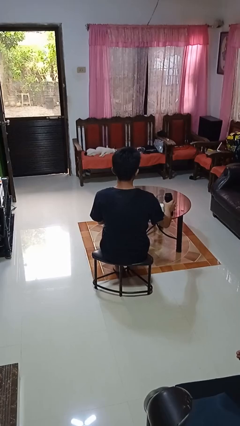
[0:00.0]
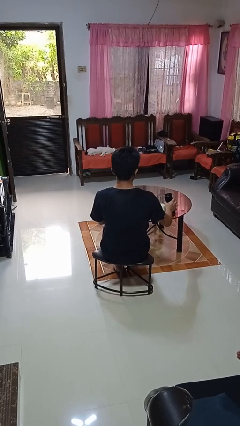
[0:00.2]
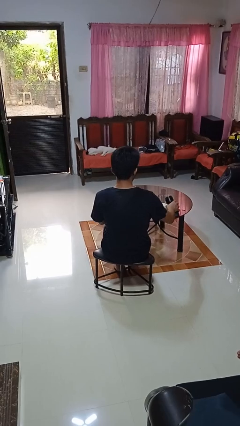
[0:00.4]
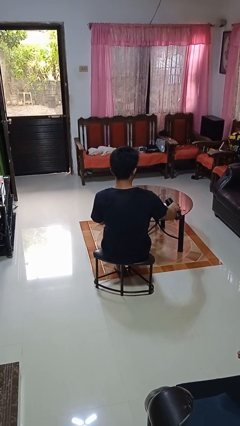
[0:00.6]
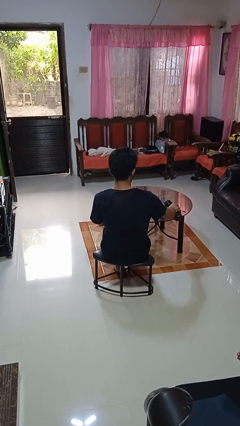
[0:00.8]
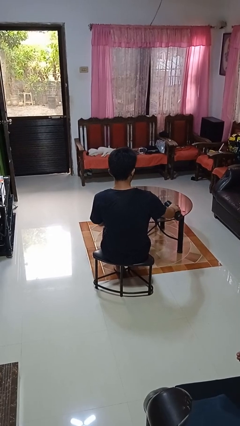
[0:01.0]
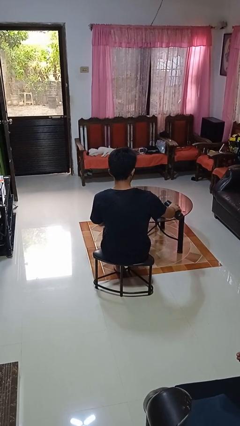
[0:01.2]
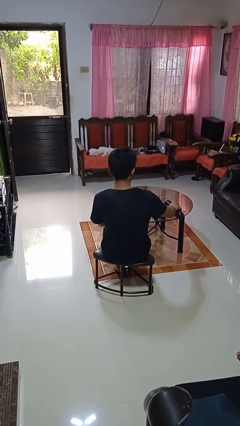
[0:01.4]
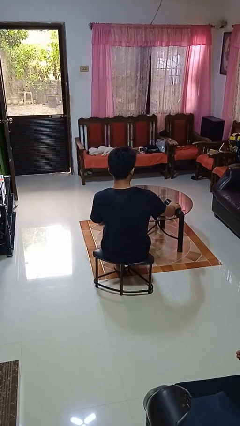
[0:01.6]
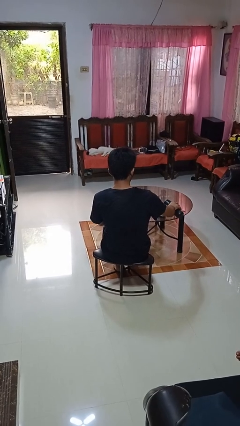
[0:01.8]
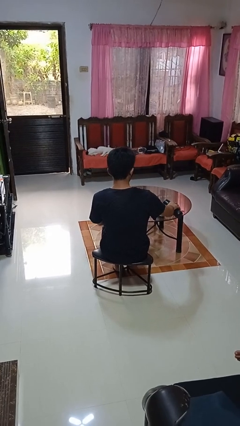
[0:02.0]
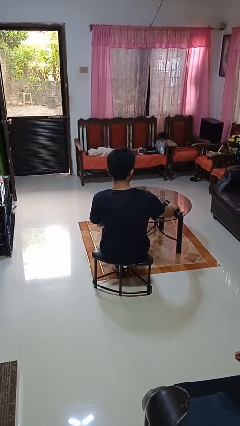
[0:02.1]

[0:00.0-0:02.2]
person pours liquid into cup

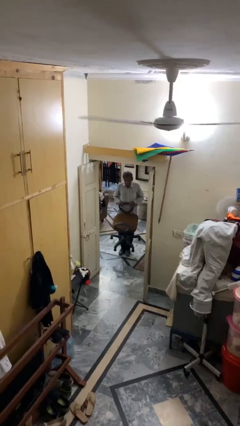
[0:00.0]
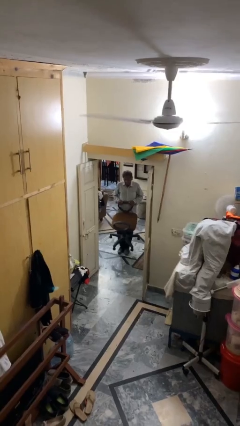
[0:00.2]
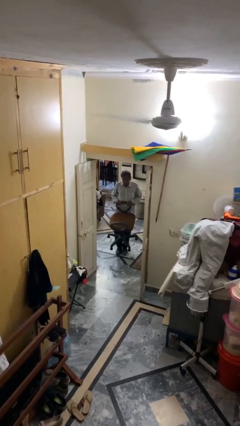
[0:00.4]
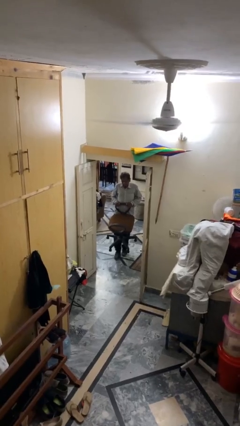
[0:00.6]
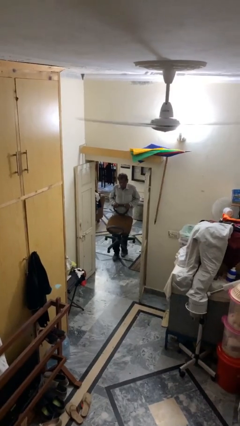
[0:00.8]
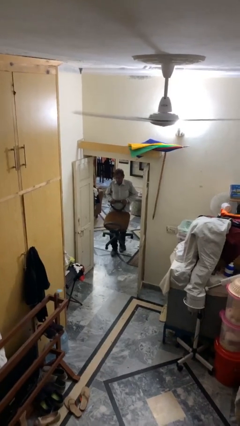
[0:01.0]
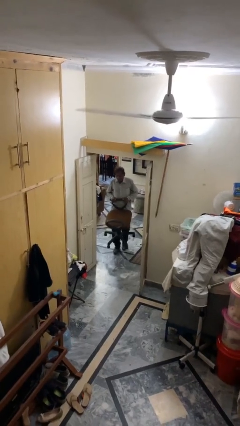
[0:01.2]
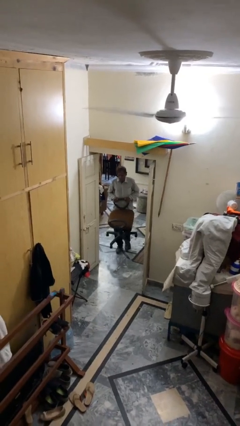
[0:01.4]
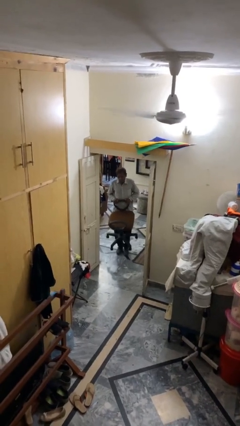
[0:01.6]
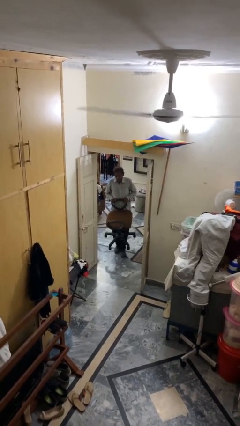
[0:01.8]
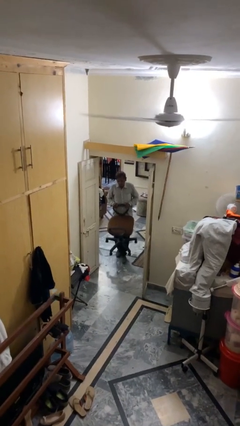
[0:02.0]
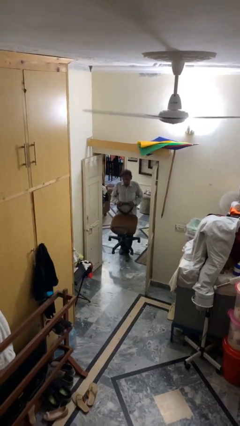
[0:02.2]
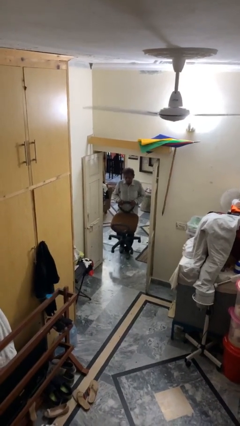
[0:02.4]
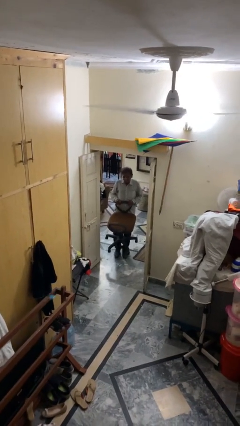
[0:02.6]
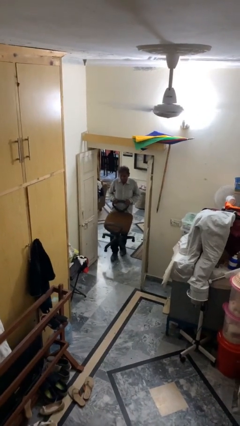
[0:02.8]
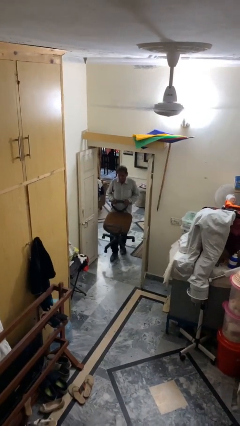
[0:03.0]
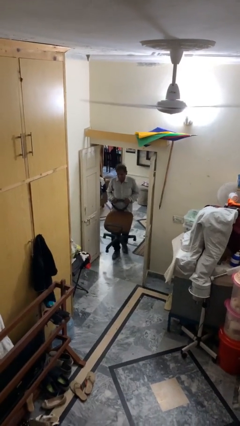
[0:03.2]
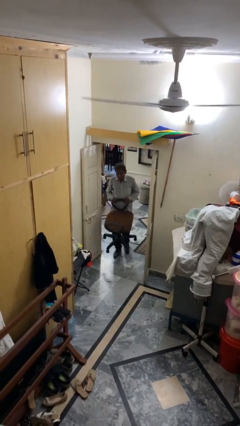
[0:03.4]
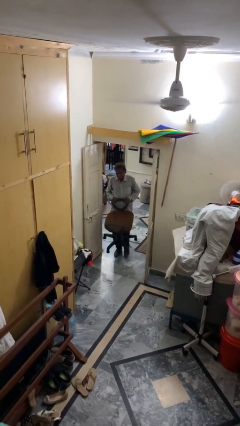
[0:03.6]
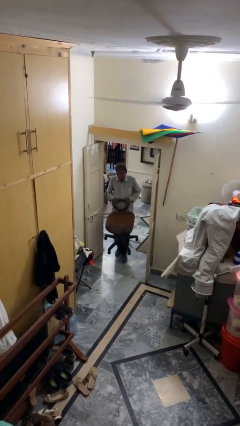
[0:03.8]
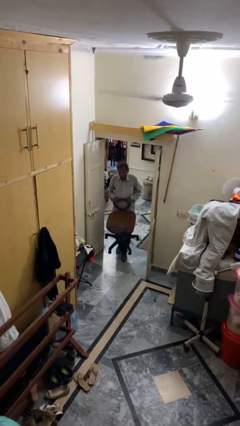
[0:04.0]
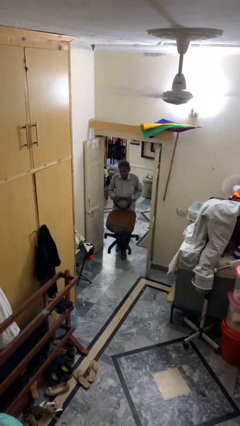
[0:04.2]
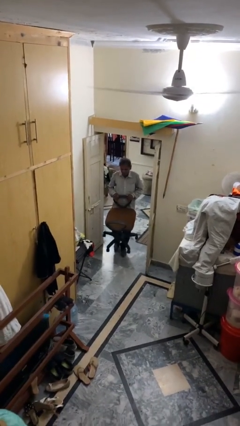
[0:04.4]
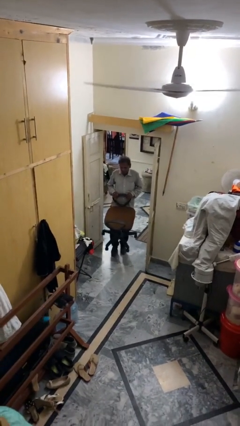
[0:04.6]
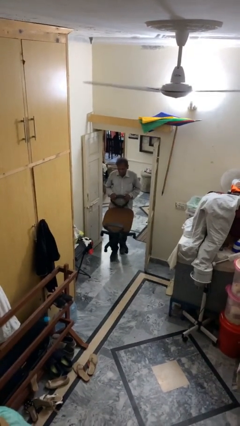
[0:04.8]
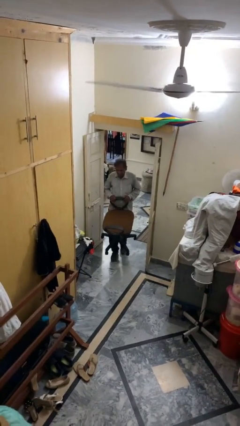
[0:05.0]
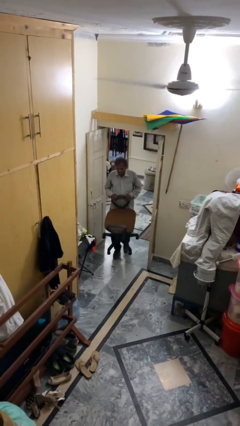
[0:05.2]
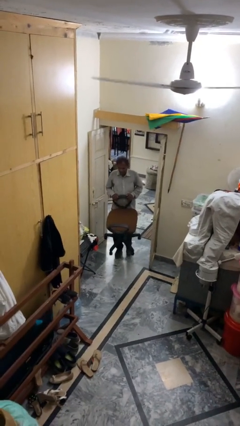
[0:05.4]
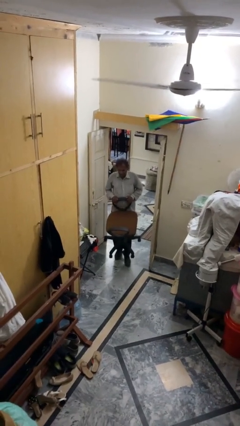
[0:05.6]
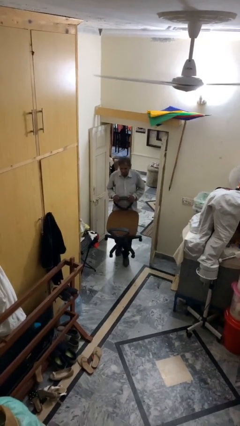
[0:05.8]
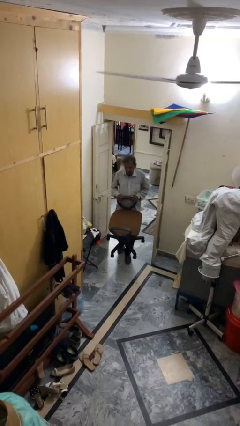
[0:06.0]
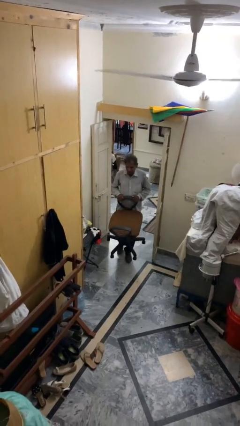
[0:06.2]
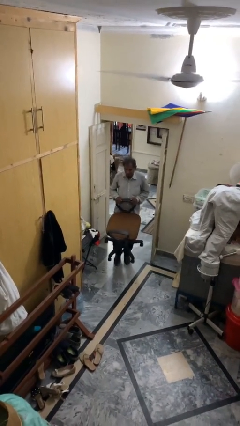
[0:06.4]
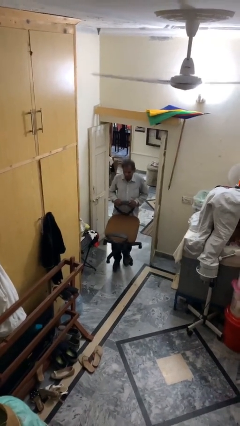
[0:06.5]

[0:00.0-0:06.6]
person carries heavy object

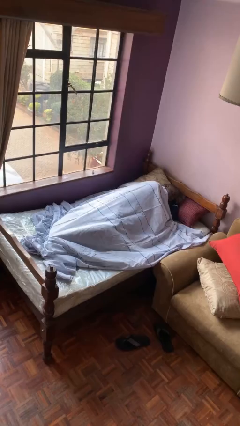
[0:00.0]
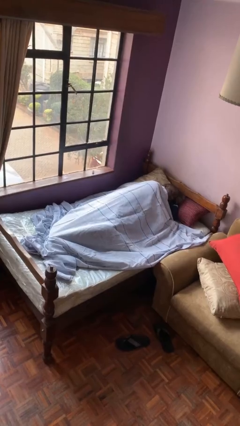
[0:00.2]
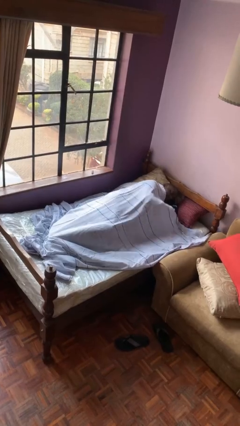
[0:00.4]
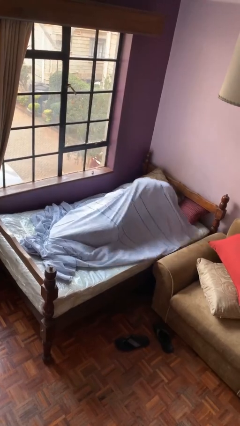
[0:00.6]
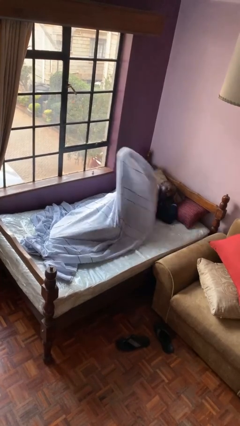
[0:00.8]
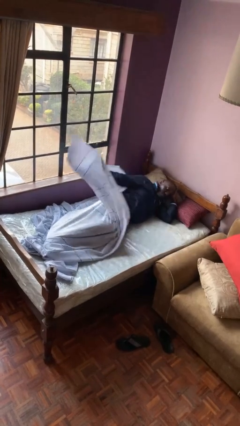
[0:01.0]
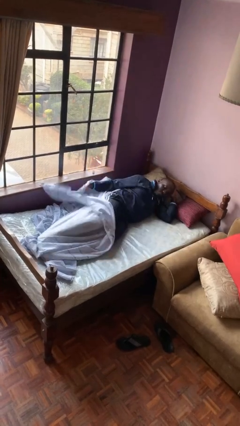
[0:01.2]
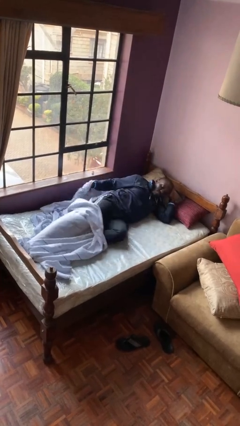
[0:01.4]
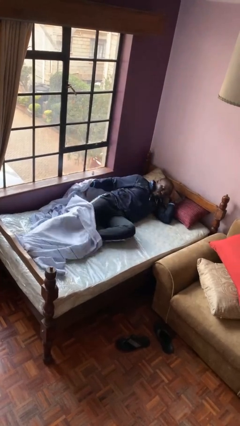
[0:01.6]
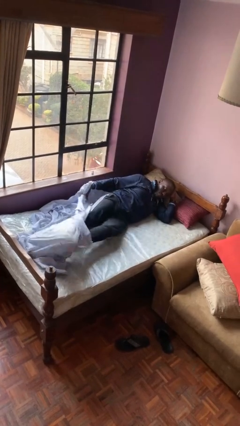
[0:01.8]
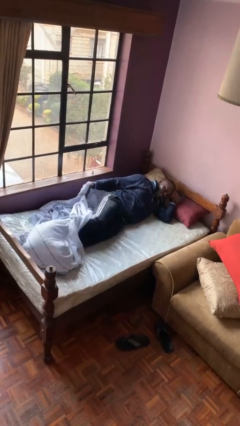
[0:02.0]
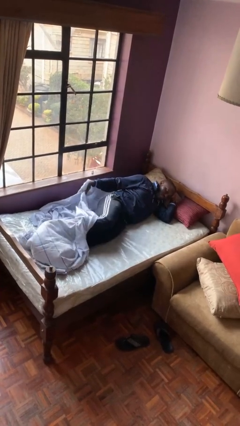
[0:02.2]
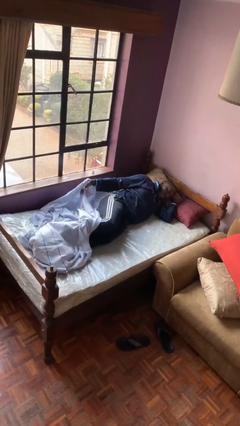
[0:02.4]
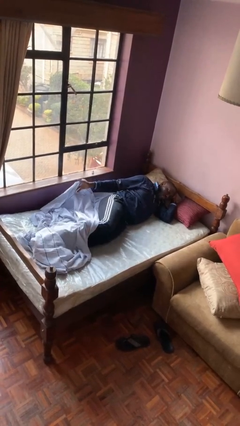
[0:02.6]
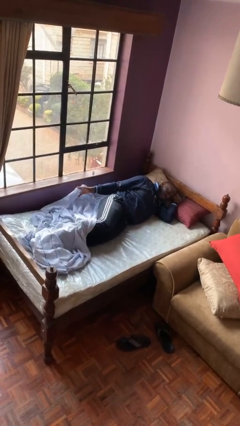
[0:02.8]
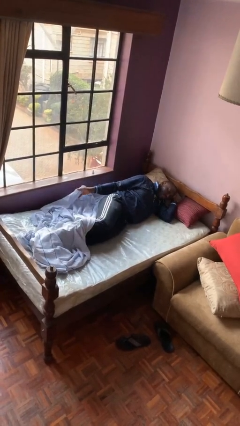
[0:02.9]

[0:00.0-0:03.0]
person uncovers with bedsheets

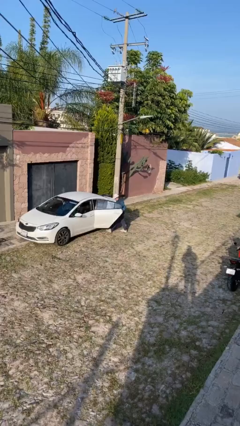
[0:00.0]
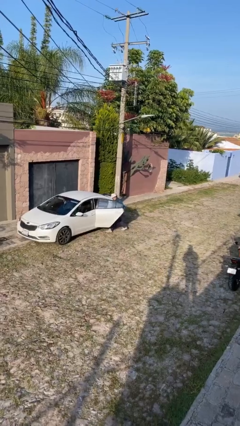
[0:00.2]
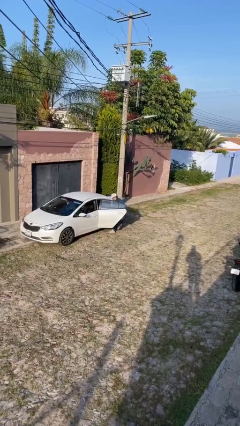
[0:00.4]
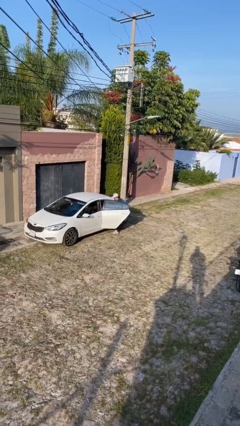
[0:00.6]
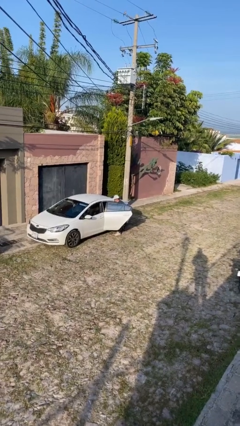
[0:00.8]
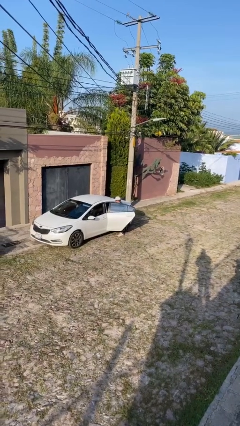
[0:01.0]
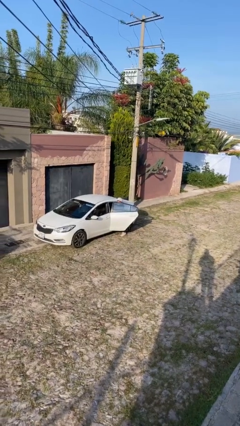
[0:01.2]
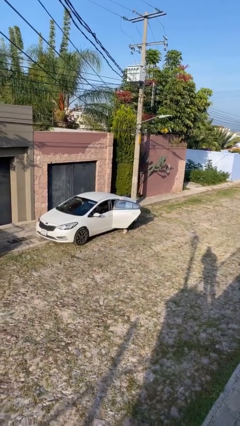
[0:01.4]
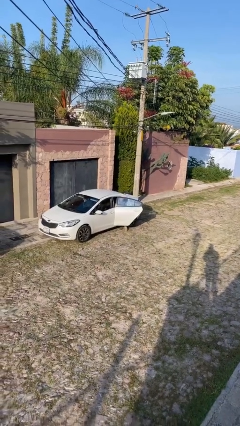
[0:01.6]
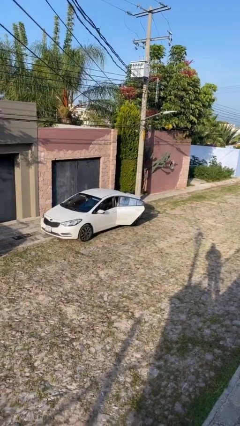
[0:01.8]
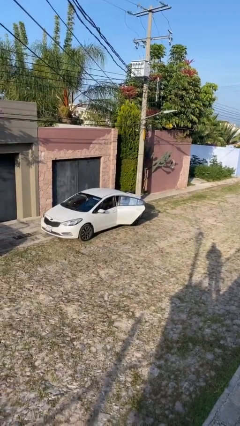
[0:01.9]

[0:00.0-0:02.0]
person enters car

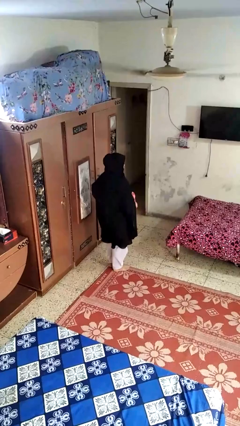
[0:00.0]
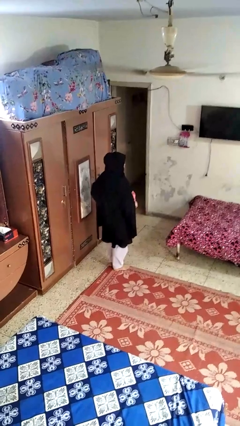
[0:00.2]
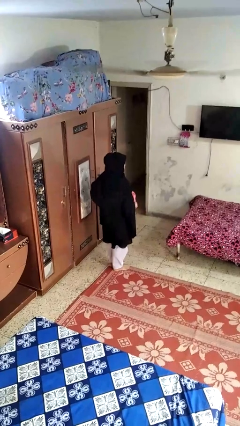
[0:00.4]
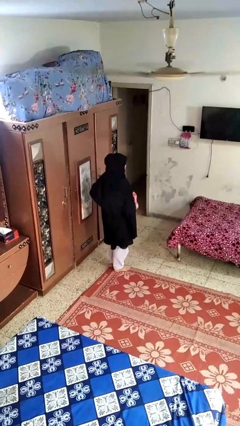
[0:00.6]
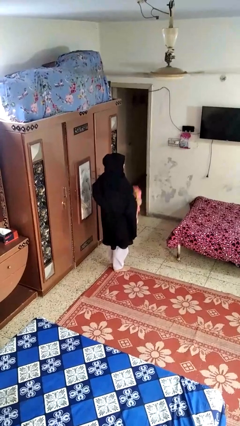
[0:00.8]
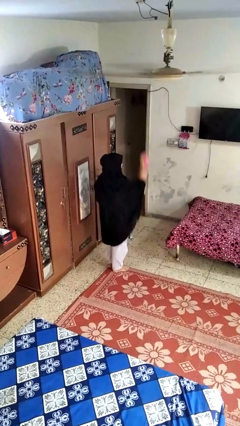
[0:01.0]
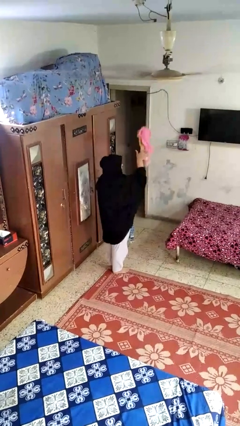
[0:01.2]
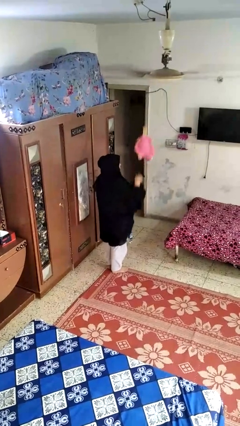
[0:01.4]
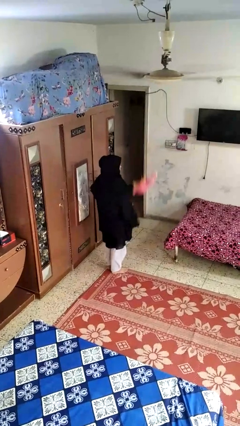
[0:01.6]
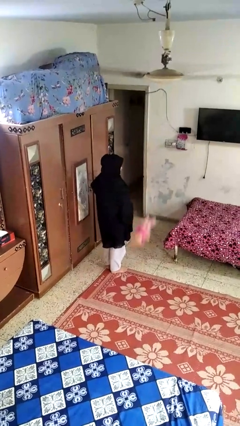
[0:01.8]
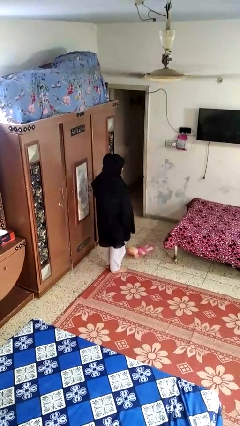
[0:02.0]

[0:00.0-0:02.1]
person throws object into air

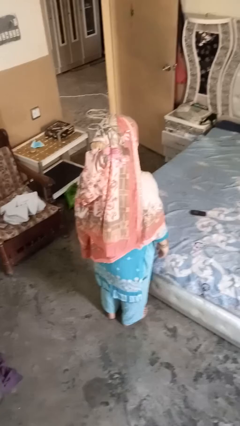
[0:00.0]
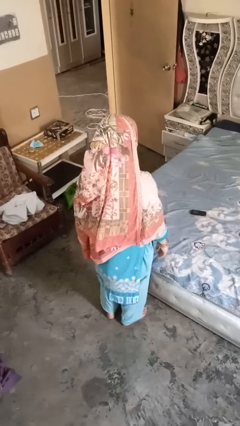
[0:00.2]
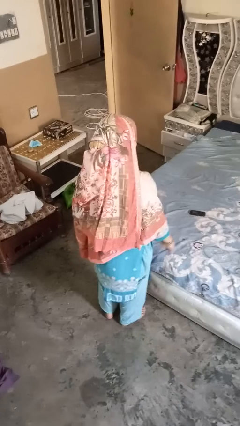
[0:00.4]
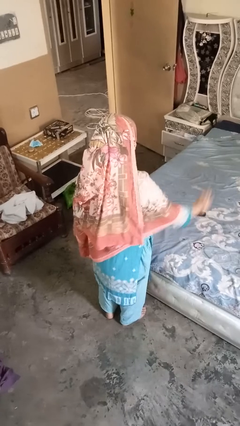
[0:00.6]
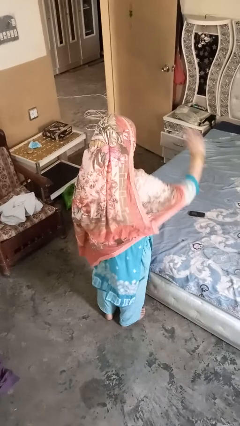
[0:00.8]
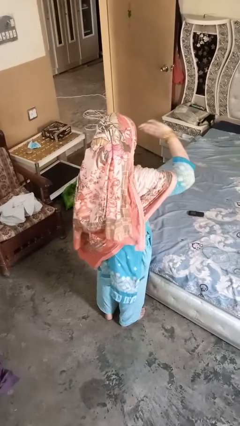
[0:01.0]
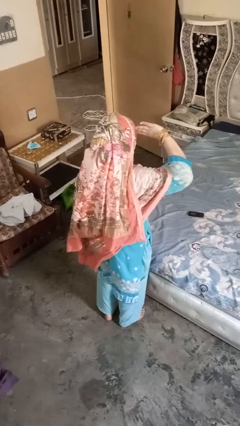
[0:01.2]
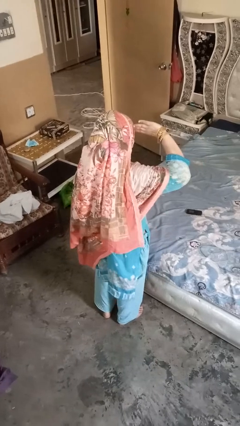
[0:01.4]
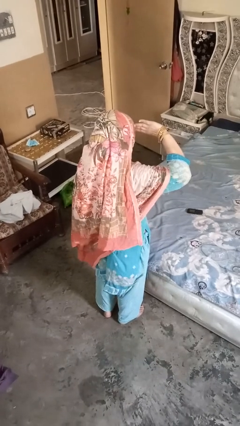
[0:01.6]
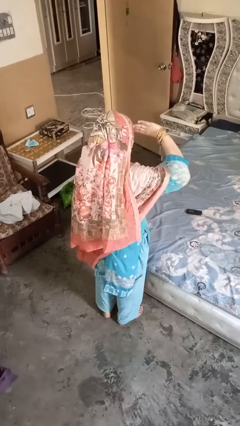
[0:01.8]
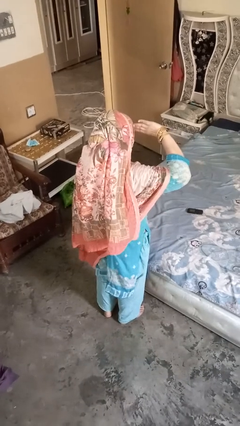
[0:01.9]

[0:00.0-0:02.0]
person salutes
